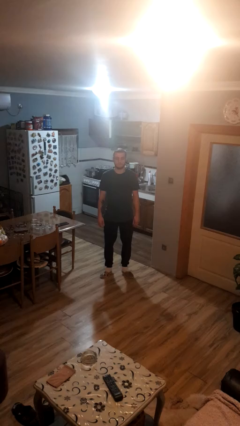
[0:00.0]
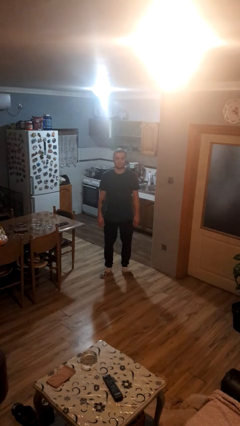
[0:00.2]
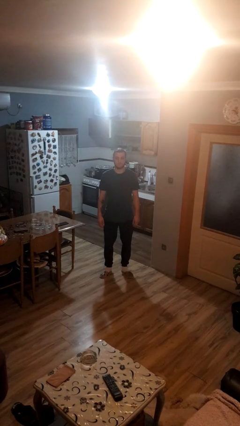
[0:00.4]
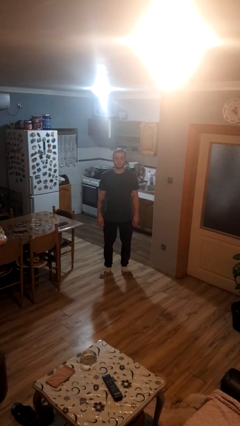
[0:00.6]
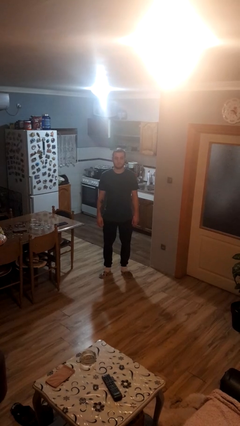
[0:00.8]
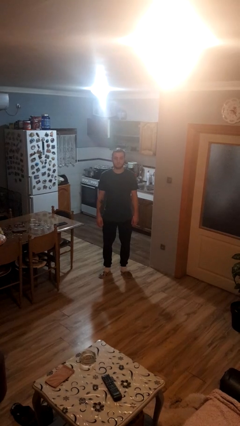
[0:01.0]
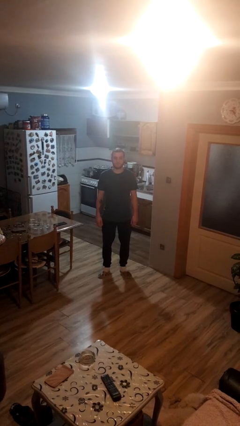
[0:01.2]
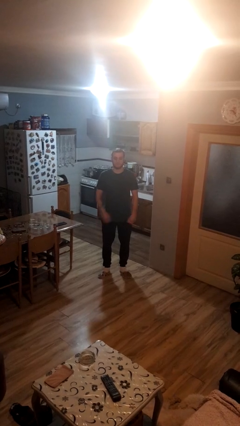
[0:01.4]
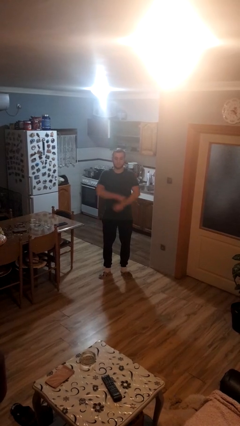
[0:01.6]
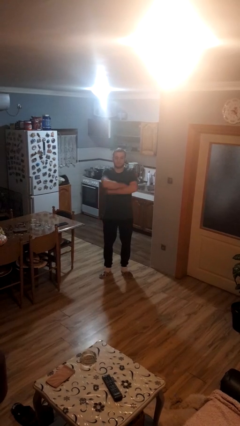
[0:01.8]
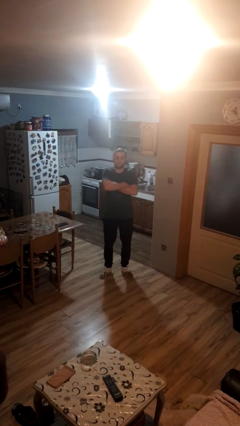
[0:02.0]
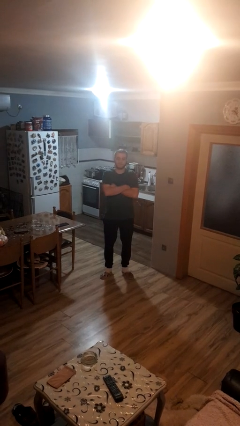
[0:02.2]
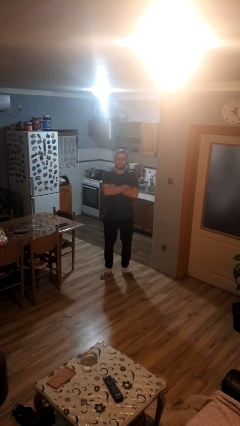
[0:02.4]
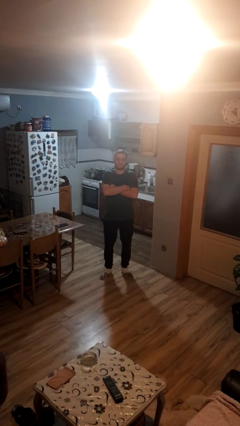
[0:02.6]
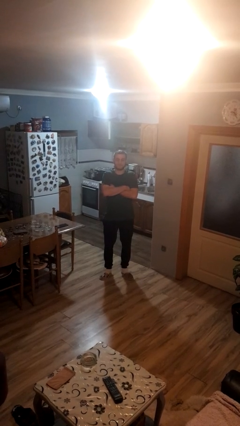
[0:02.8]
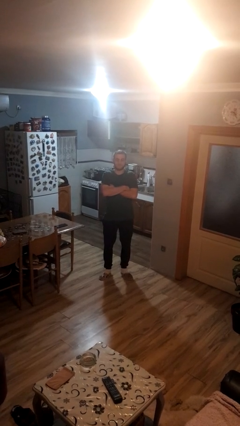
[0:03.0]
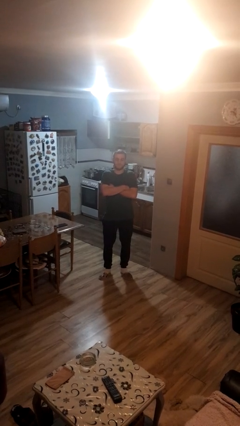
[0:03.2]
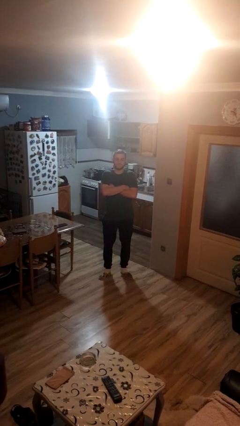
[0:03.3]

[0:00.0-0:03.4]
person crosses arms

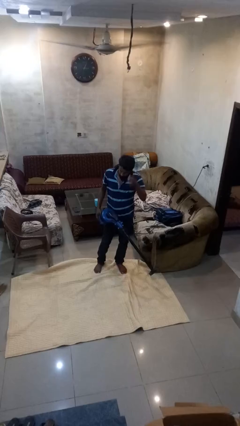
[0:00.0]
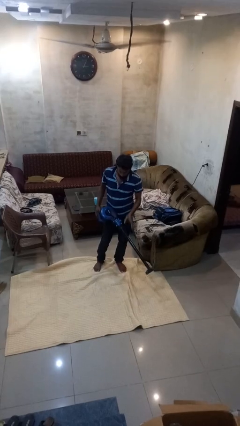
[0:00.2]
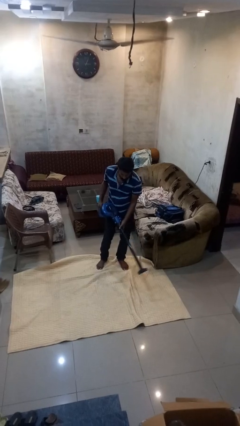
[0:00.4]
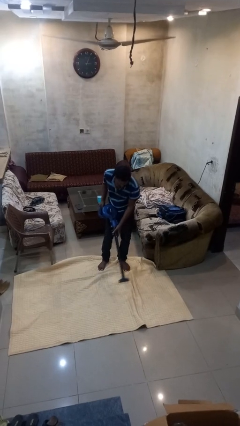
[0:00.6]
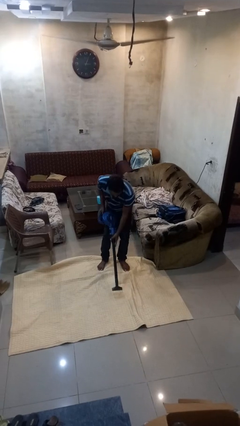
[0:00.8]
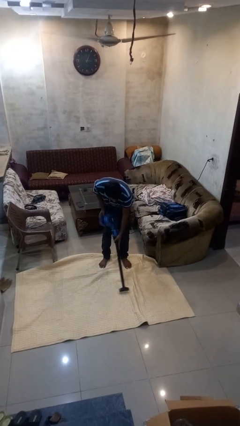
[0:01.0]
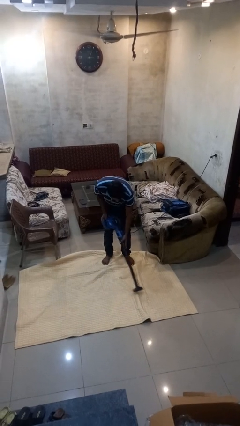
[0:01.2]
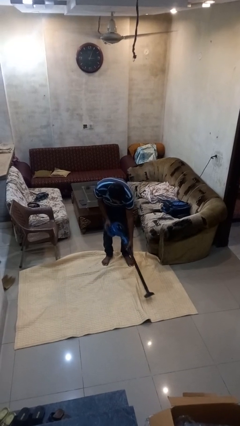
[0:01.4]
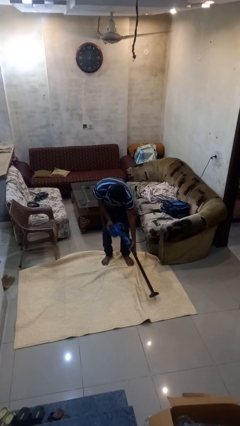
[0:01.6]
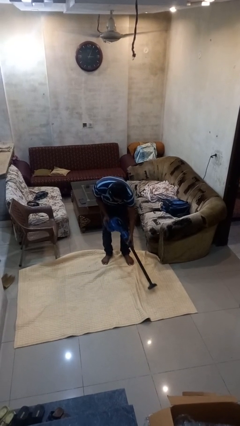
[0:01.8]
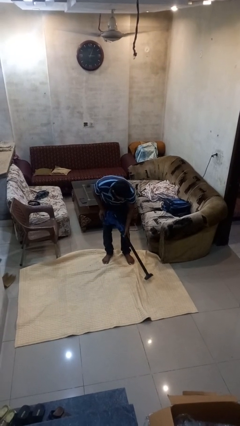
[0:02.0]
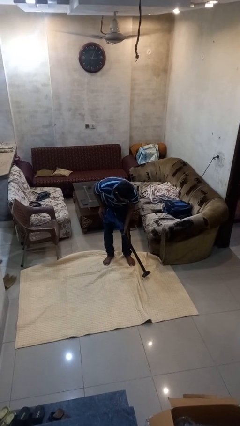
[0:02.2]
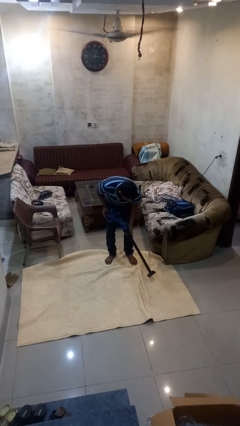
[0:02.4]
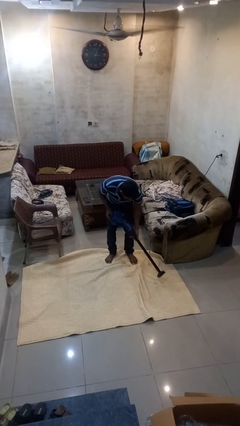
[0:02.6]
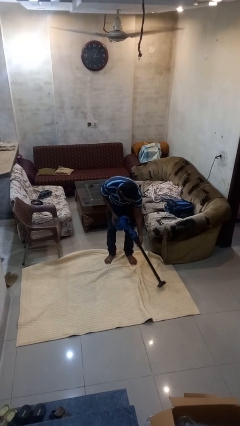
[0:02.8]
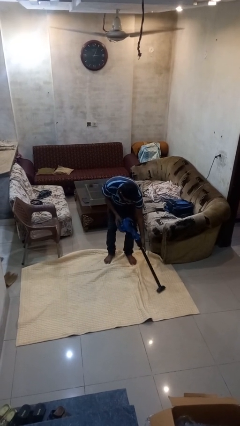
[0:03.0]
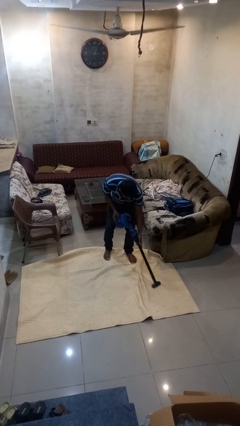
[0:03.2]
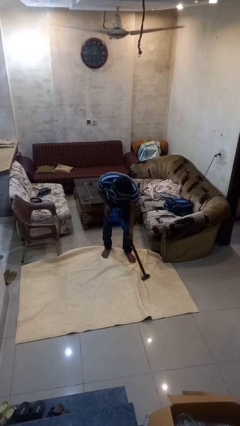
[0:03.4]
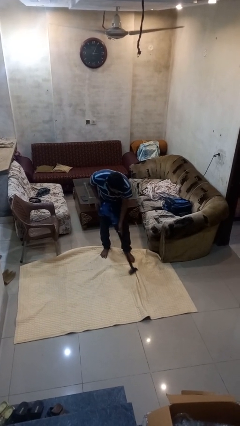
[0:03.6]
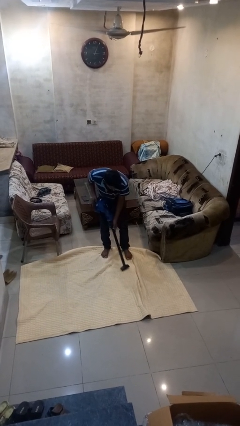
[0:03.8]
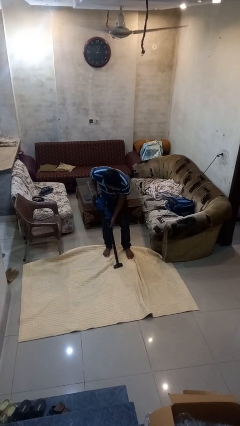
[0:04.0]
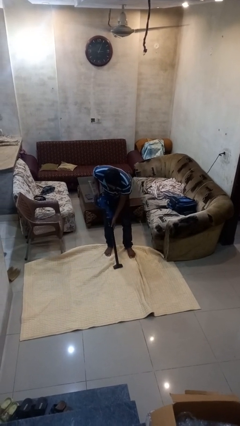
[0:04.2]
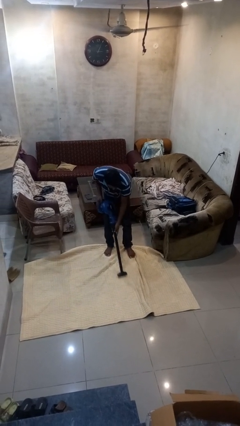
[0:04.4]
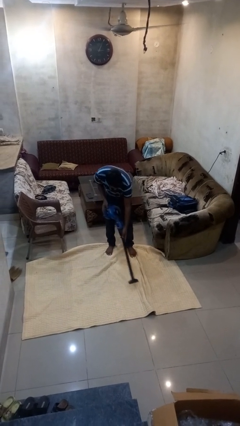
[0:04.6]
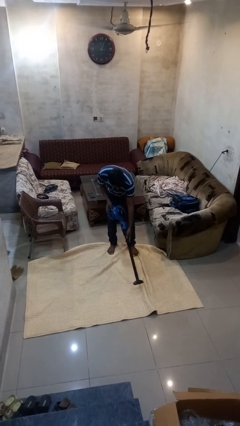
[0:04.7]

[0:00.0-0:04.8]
person vacuums carpet

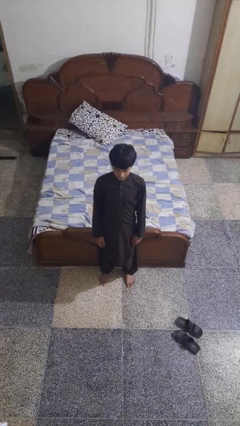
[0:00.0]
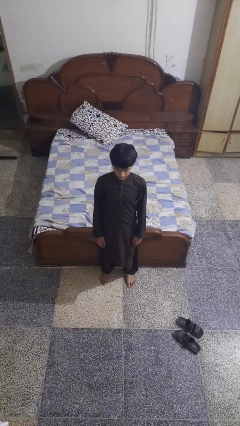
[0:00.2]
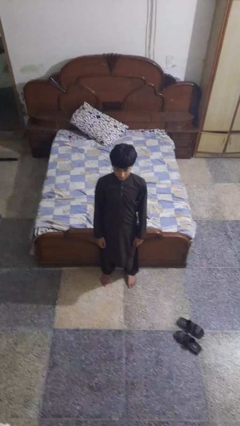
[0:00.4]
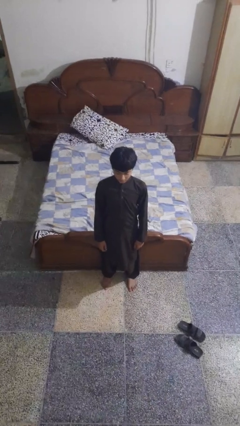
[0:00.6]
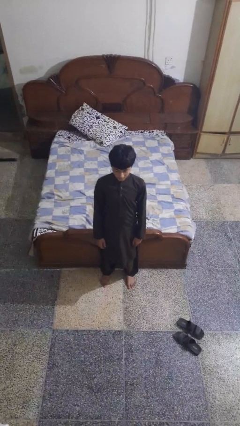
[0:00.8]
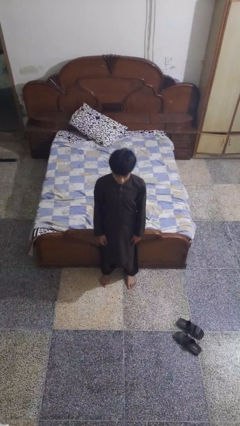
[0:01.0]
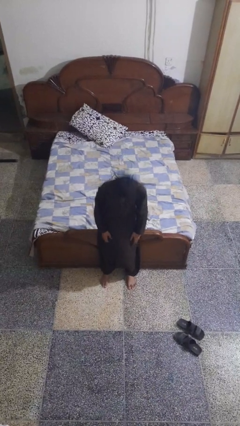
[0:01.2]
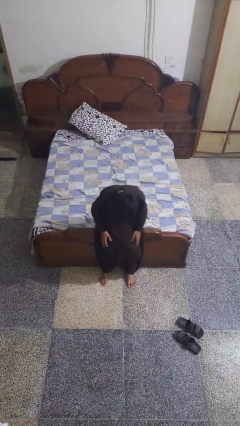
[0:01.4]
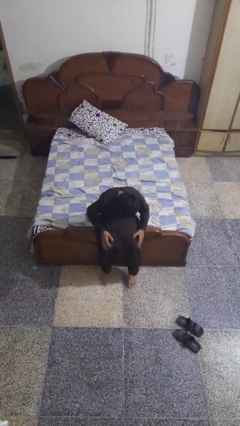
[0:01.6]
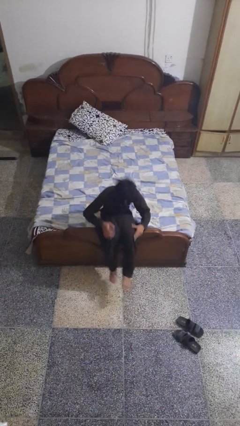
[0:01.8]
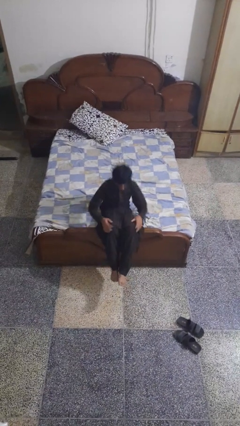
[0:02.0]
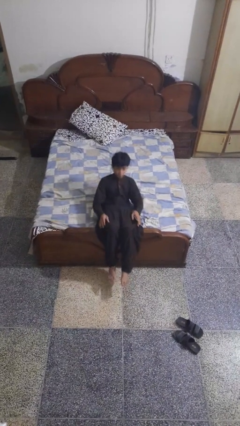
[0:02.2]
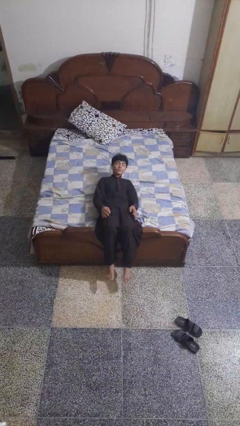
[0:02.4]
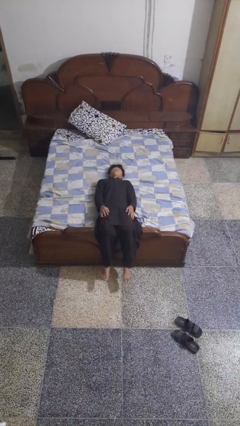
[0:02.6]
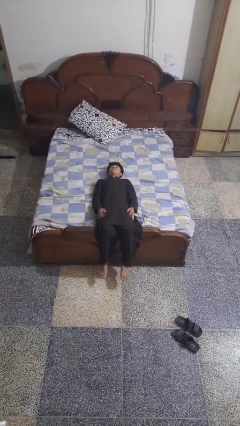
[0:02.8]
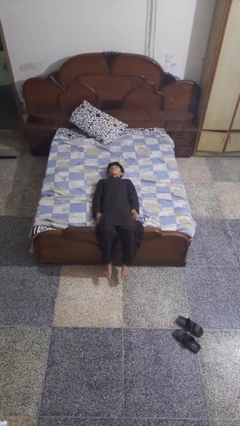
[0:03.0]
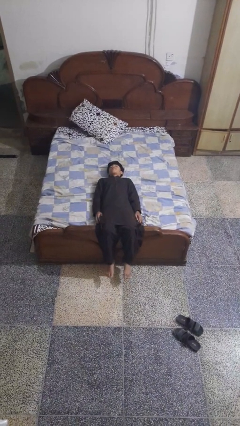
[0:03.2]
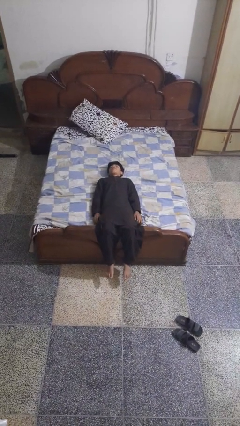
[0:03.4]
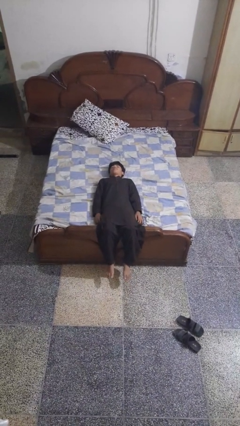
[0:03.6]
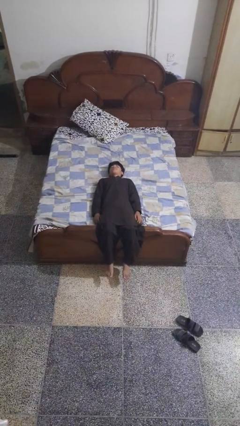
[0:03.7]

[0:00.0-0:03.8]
person lies down on bed

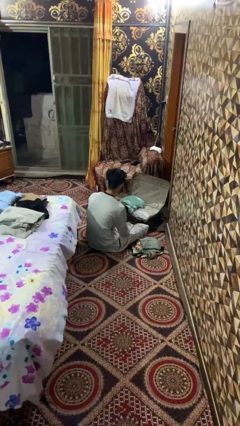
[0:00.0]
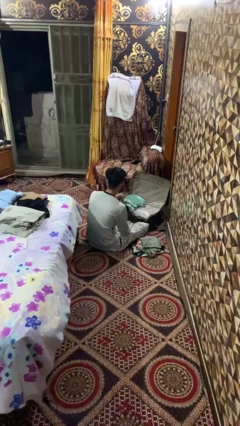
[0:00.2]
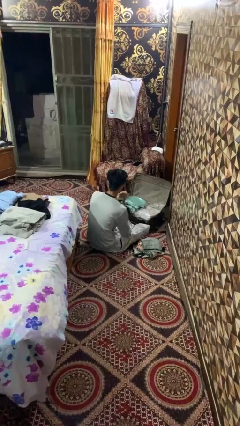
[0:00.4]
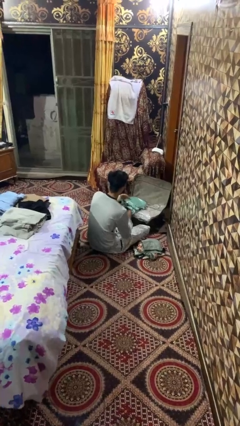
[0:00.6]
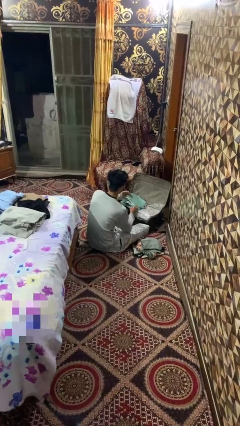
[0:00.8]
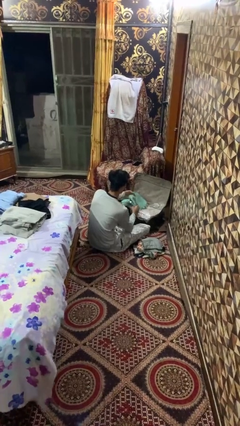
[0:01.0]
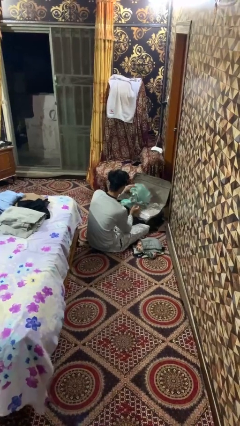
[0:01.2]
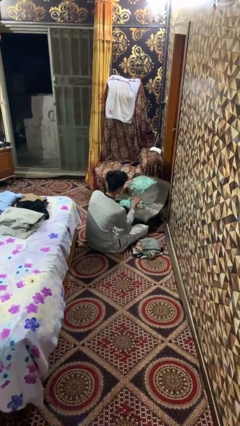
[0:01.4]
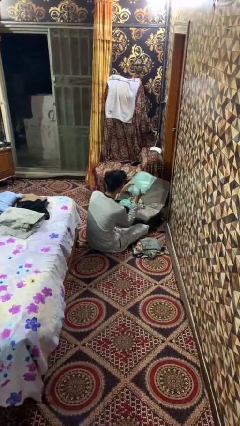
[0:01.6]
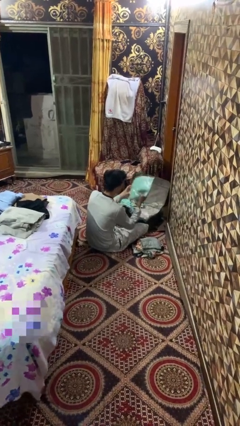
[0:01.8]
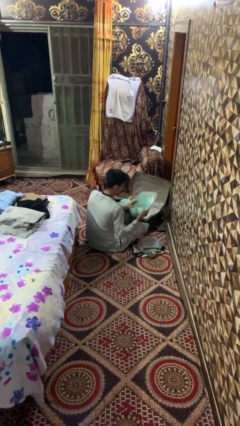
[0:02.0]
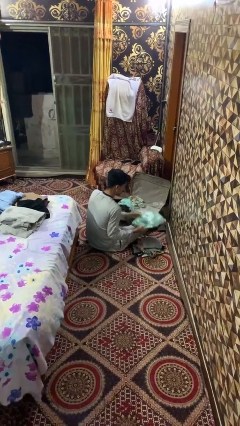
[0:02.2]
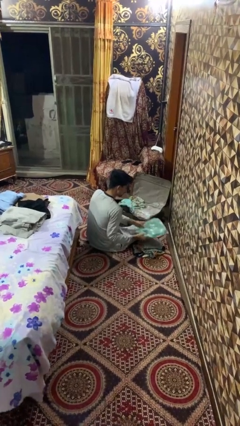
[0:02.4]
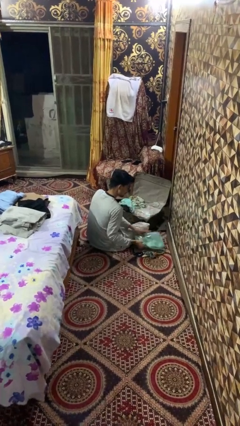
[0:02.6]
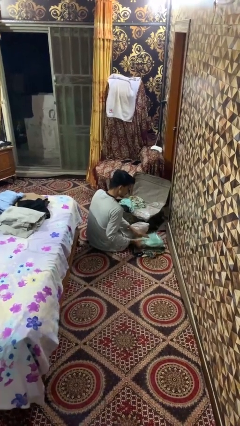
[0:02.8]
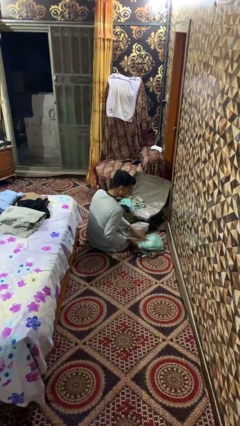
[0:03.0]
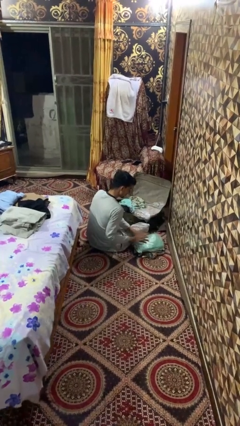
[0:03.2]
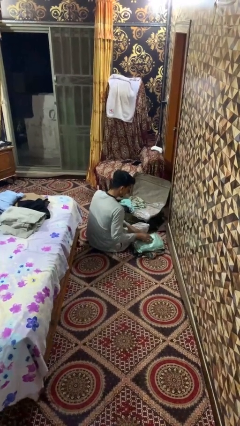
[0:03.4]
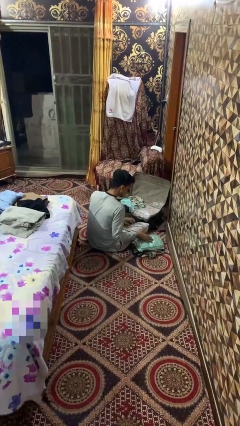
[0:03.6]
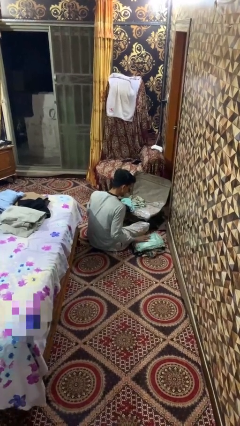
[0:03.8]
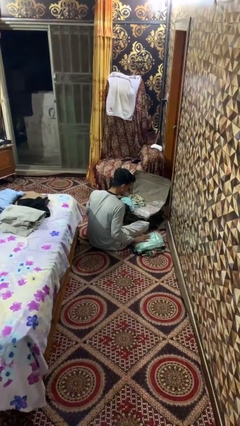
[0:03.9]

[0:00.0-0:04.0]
person unloads clothes from suitcase

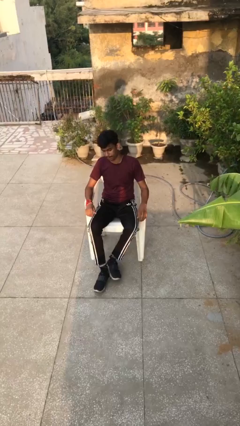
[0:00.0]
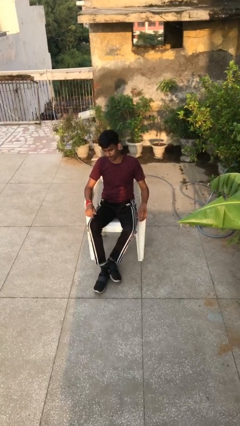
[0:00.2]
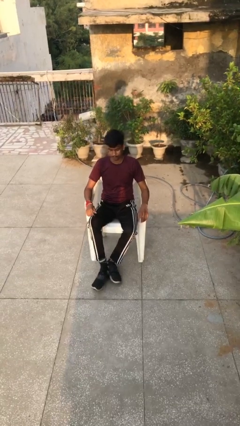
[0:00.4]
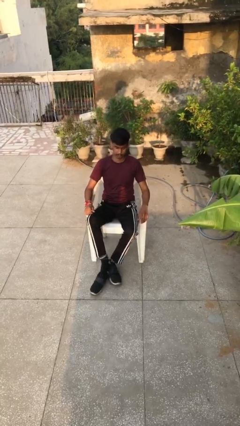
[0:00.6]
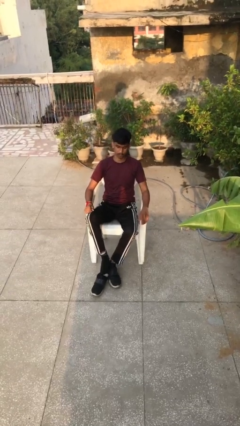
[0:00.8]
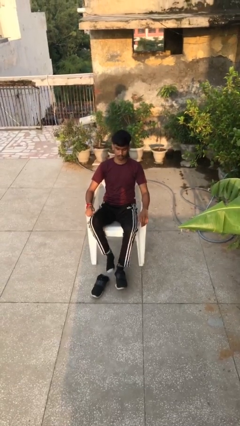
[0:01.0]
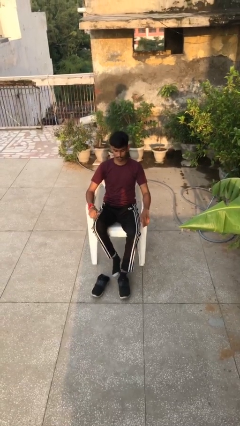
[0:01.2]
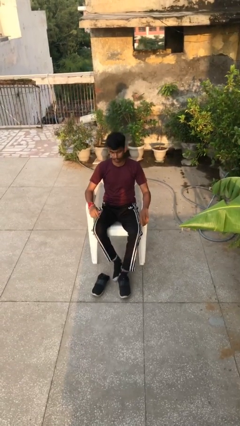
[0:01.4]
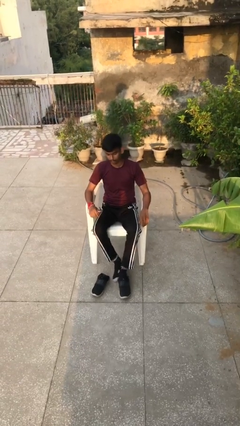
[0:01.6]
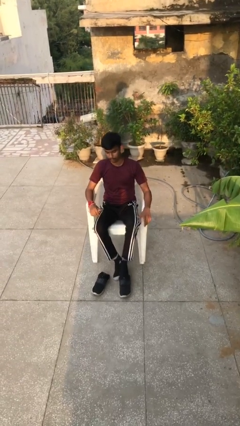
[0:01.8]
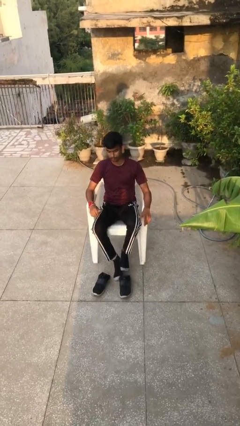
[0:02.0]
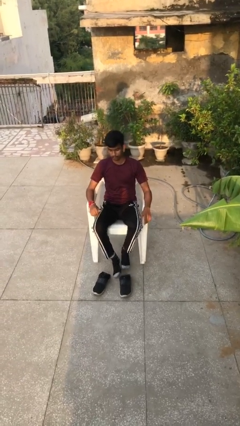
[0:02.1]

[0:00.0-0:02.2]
person takes off shoes
